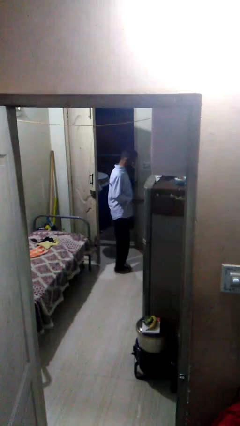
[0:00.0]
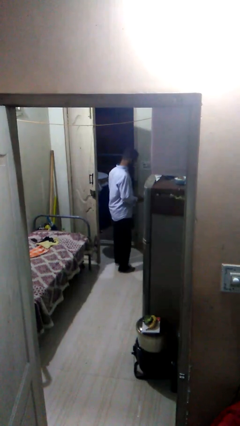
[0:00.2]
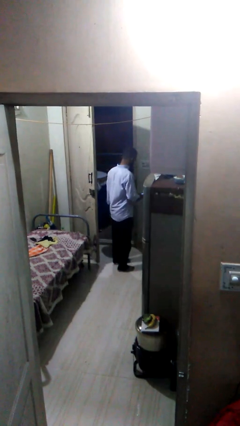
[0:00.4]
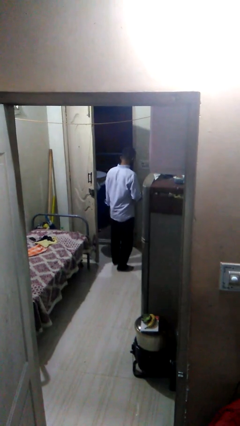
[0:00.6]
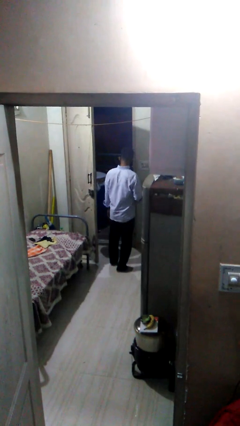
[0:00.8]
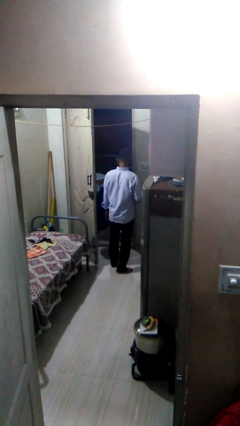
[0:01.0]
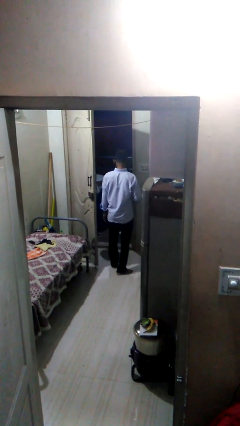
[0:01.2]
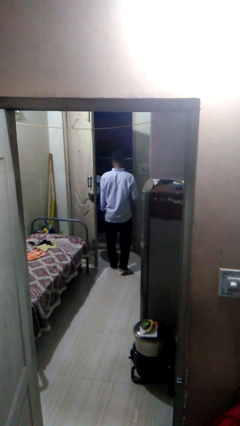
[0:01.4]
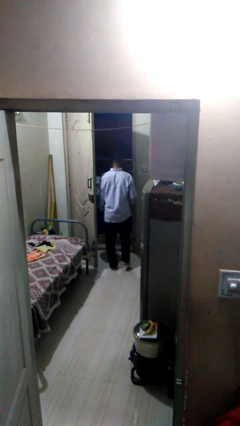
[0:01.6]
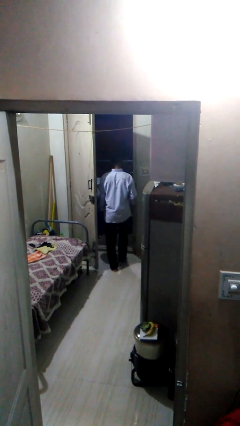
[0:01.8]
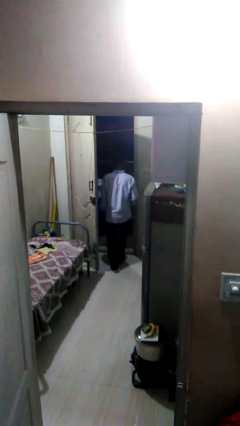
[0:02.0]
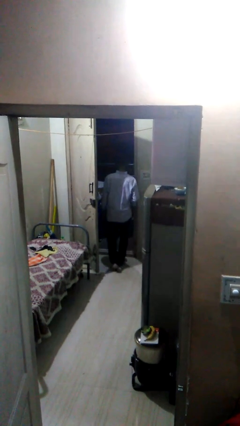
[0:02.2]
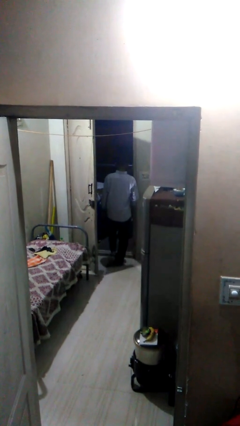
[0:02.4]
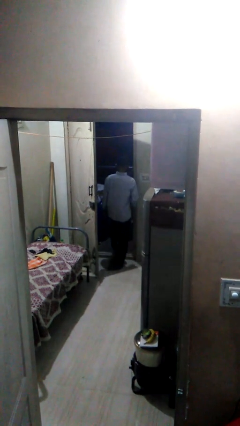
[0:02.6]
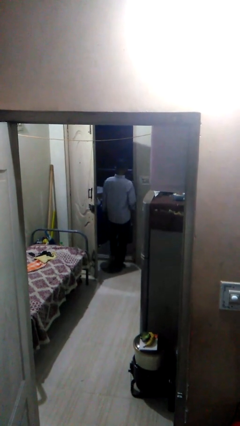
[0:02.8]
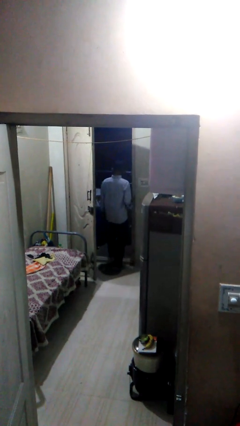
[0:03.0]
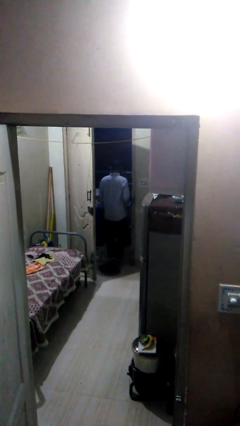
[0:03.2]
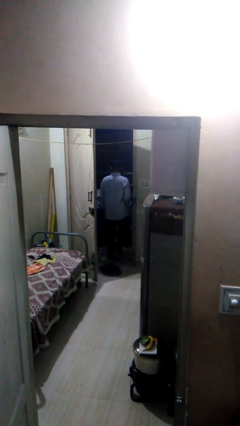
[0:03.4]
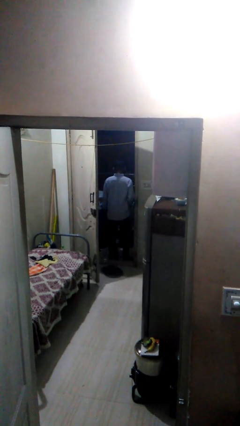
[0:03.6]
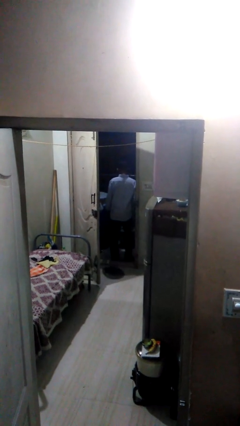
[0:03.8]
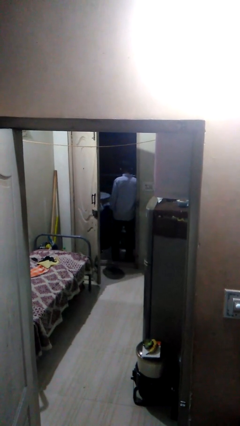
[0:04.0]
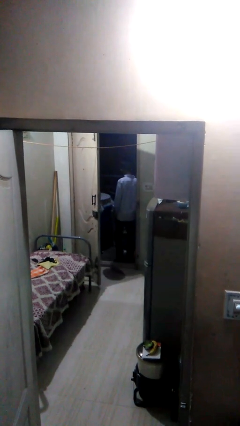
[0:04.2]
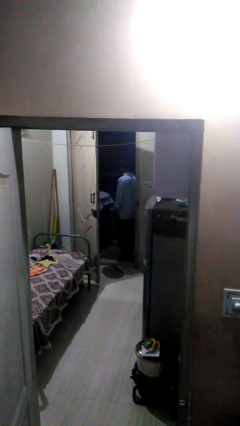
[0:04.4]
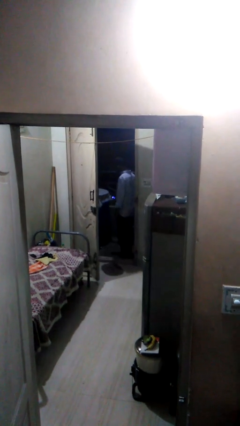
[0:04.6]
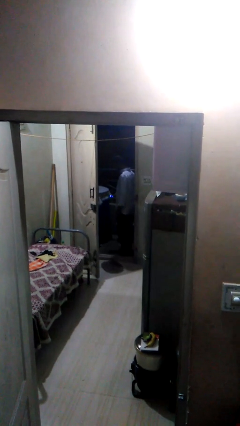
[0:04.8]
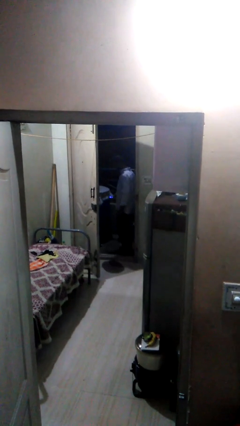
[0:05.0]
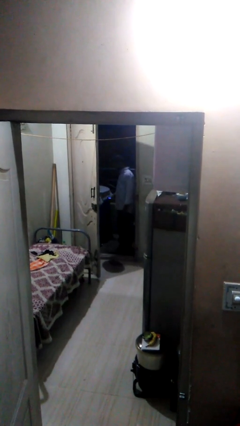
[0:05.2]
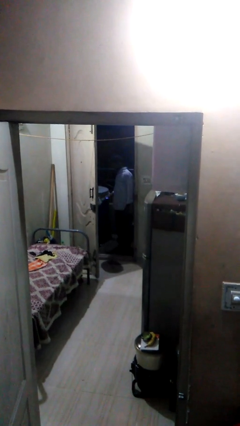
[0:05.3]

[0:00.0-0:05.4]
person exits scene through structure

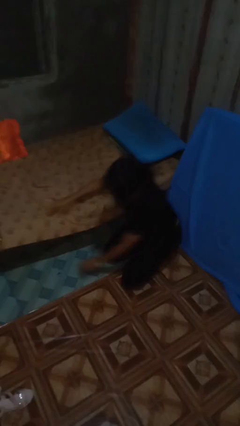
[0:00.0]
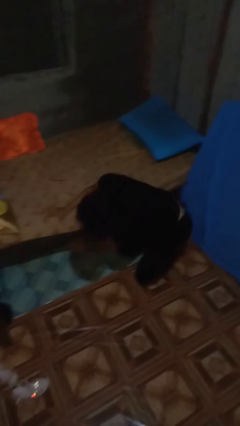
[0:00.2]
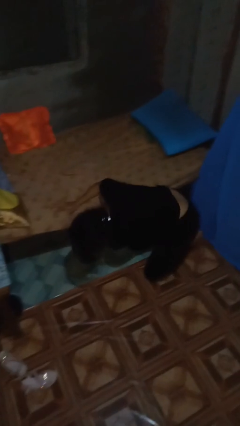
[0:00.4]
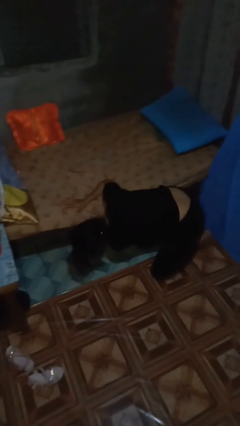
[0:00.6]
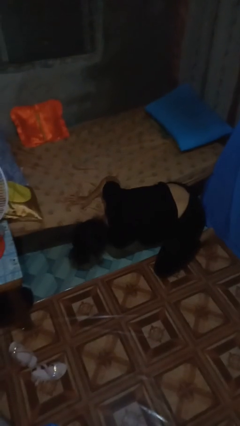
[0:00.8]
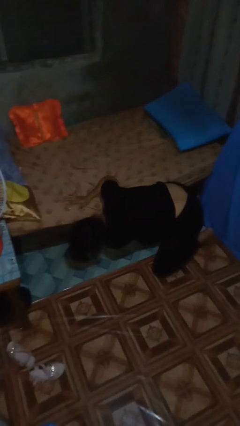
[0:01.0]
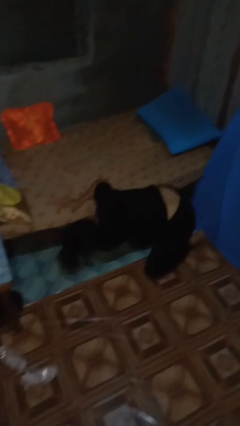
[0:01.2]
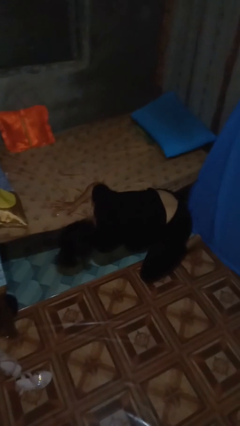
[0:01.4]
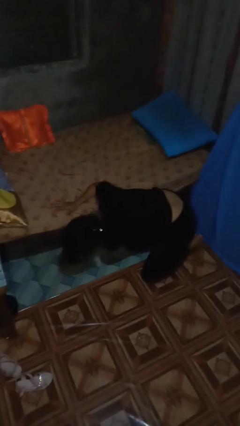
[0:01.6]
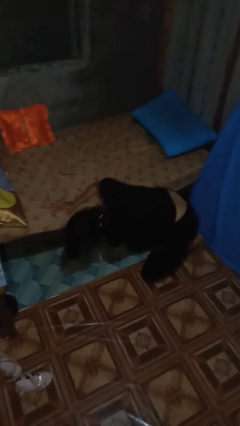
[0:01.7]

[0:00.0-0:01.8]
person searches under bed

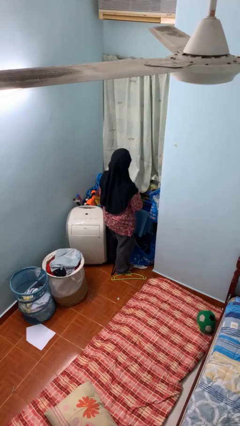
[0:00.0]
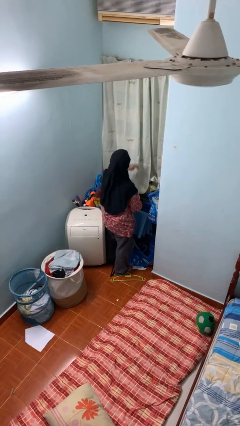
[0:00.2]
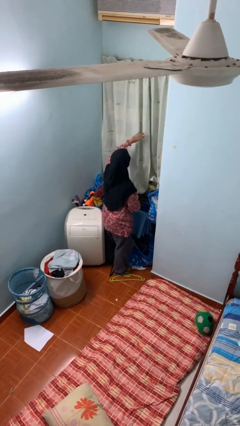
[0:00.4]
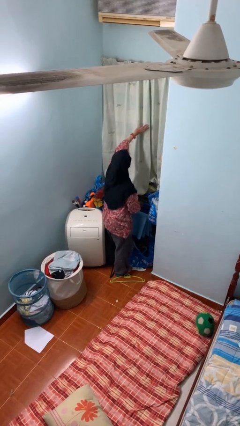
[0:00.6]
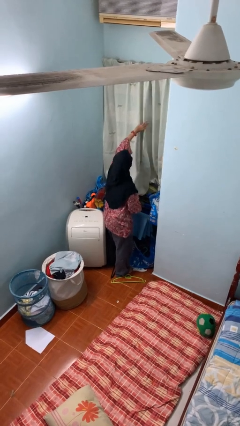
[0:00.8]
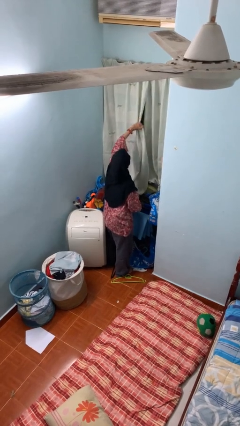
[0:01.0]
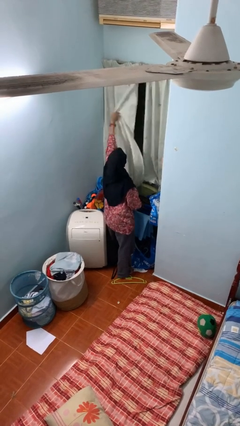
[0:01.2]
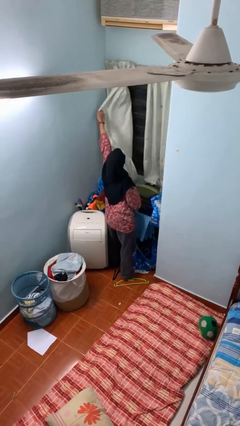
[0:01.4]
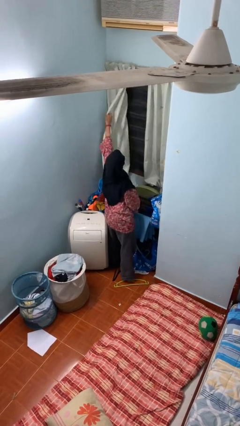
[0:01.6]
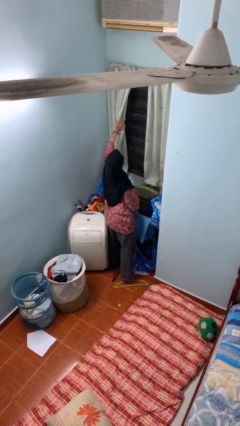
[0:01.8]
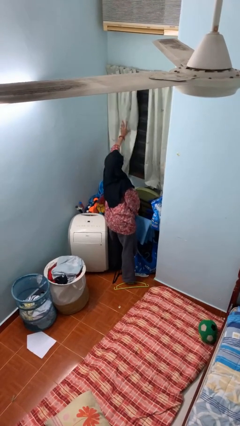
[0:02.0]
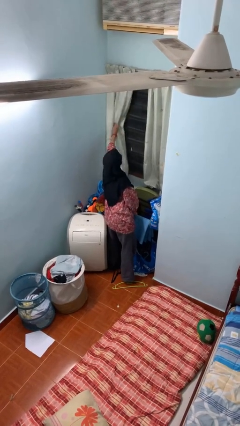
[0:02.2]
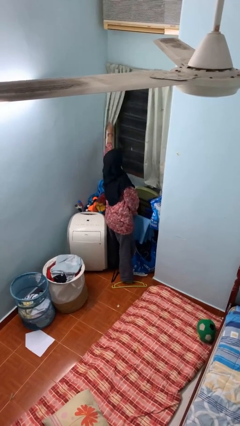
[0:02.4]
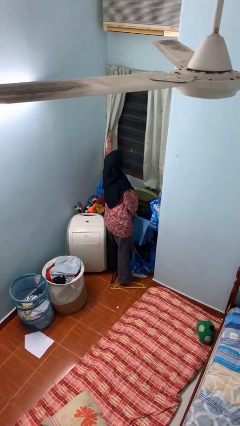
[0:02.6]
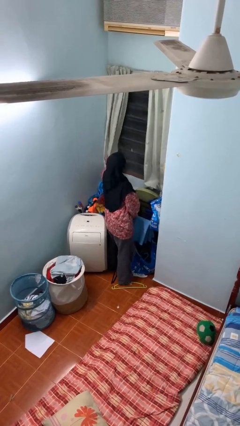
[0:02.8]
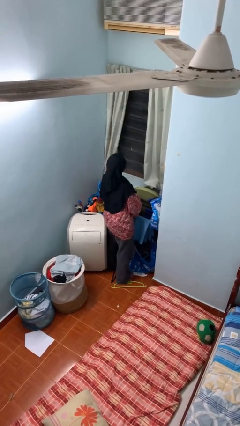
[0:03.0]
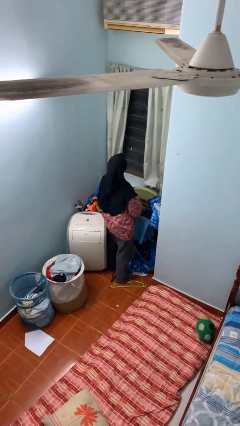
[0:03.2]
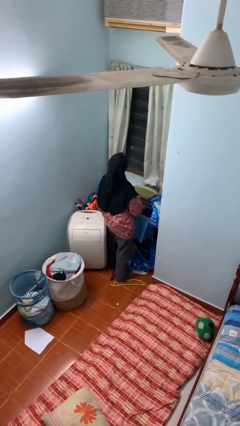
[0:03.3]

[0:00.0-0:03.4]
person opens curtains

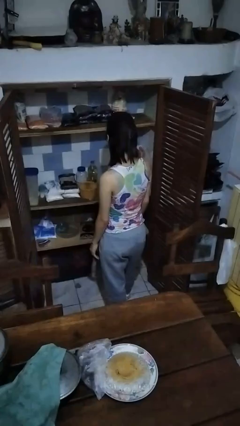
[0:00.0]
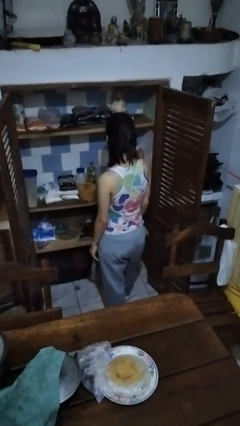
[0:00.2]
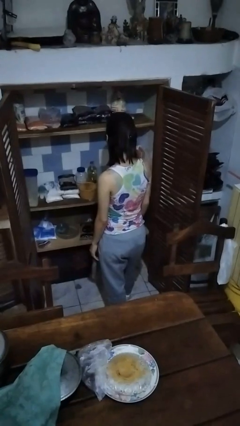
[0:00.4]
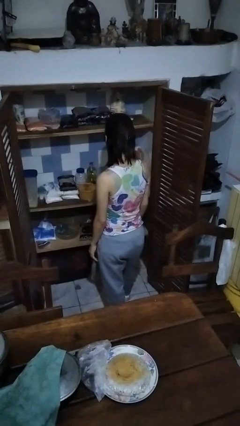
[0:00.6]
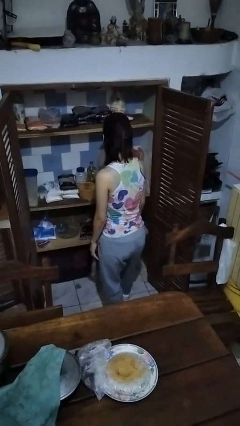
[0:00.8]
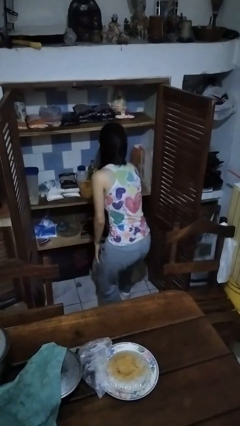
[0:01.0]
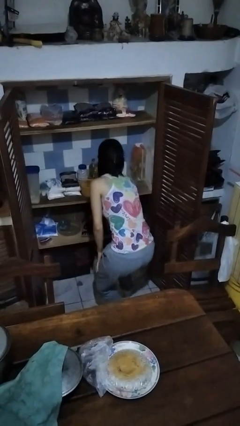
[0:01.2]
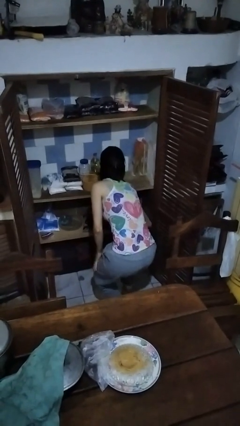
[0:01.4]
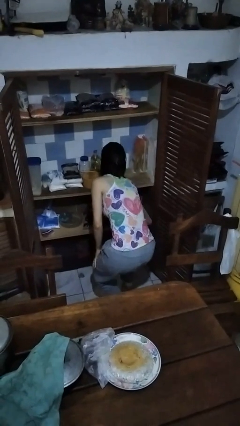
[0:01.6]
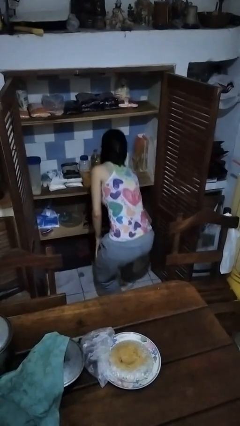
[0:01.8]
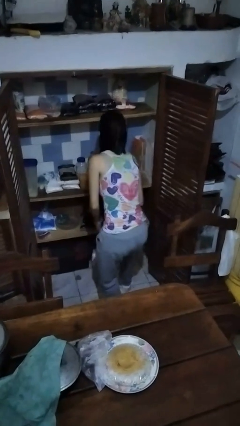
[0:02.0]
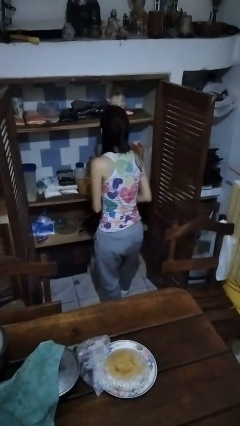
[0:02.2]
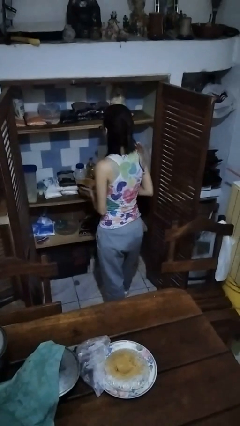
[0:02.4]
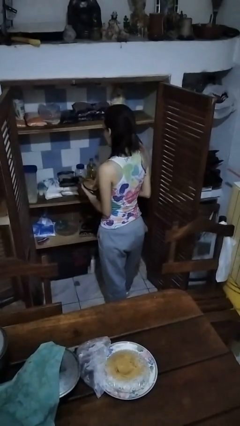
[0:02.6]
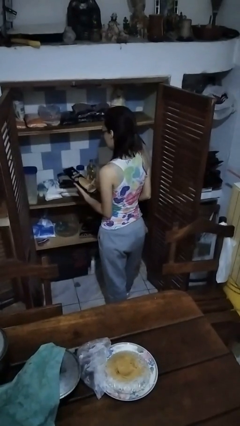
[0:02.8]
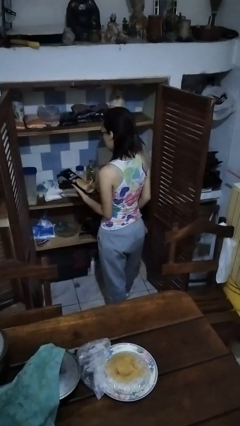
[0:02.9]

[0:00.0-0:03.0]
person takes object from cabinet

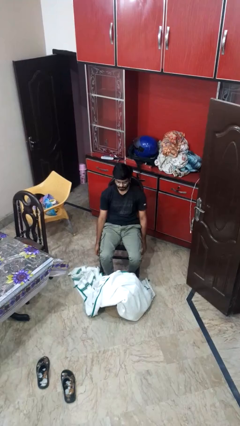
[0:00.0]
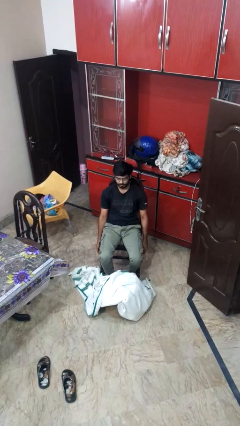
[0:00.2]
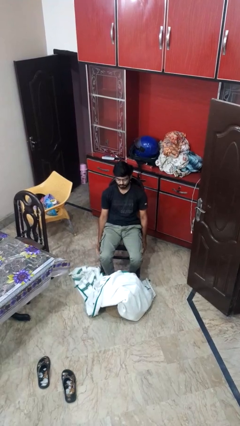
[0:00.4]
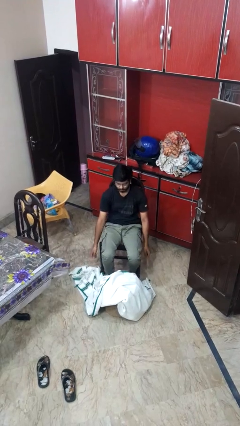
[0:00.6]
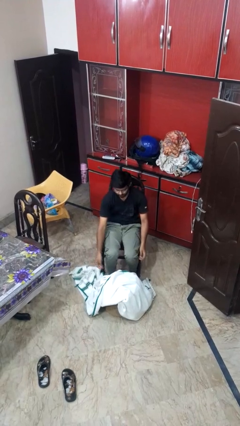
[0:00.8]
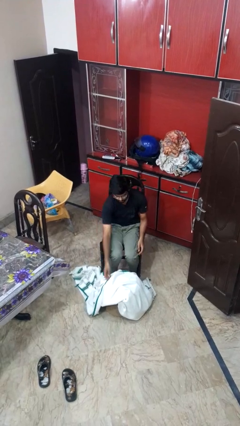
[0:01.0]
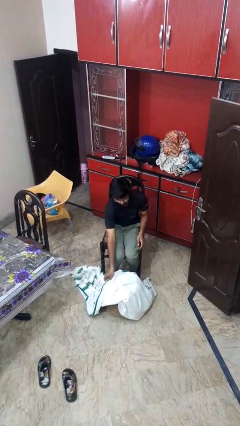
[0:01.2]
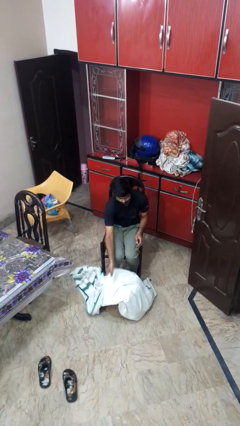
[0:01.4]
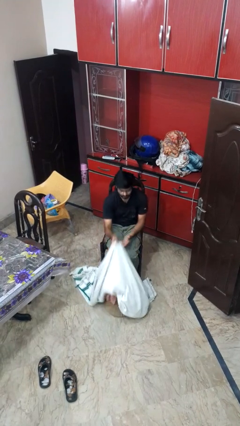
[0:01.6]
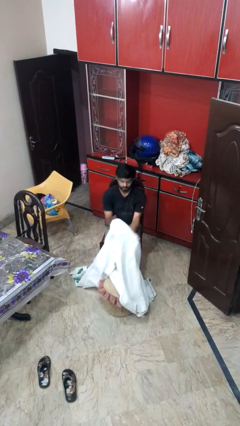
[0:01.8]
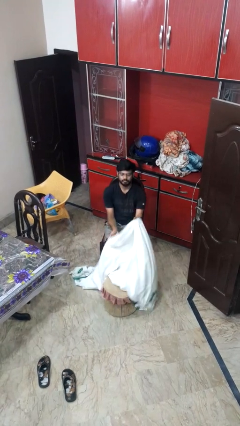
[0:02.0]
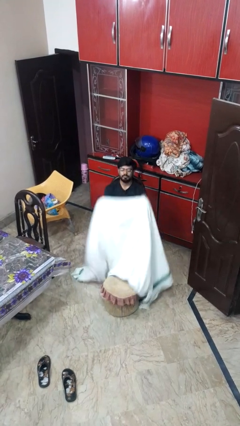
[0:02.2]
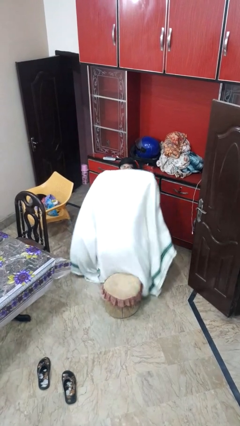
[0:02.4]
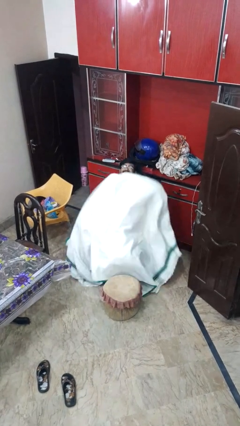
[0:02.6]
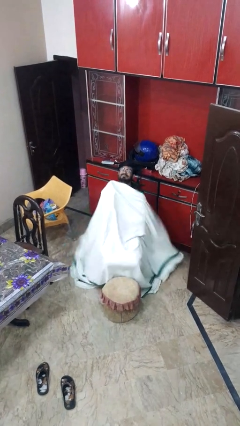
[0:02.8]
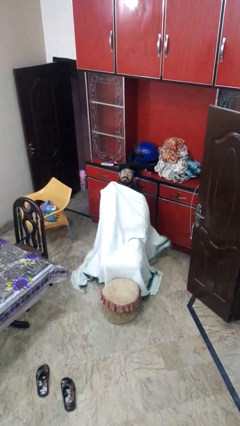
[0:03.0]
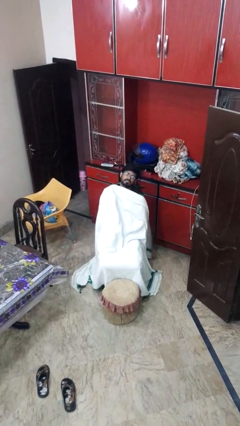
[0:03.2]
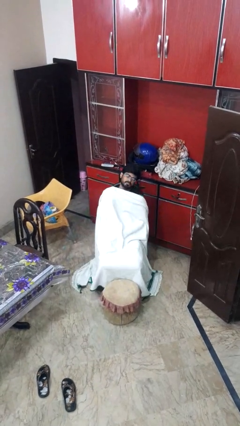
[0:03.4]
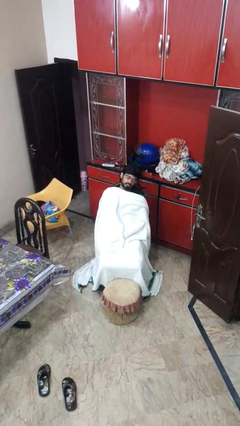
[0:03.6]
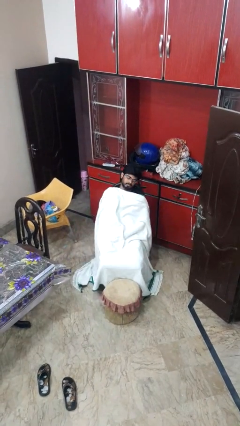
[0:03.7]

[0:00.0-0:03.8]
person covers with blanket
